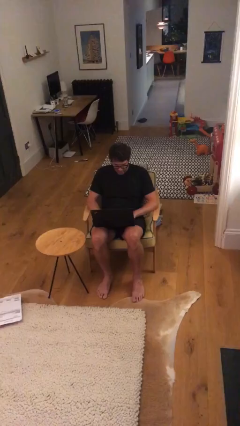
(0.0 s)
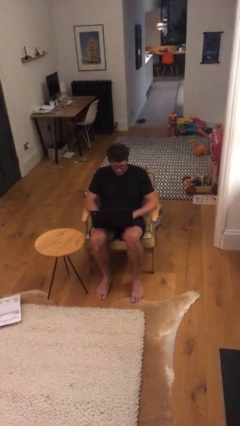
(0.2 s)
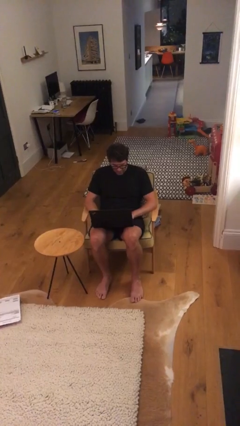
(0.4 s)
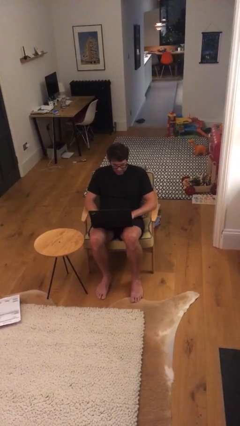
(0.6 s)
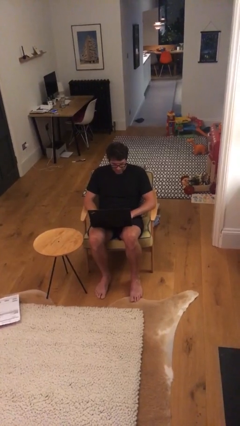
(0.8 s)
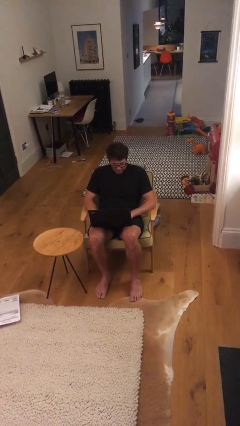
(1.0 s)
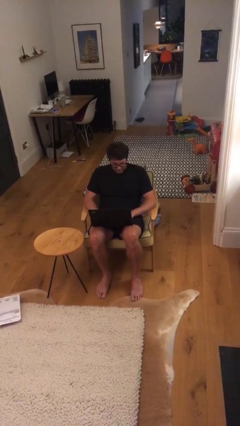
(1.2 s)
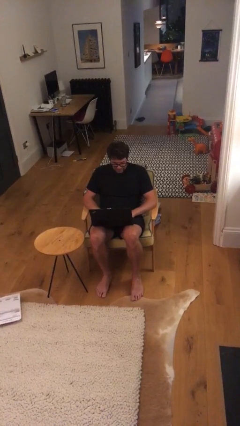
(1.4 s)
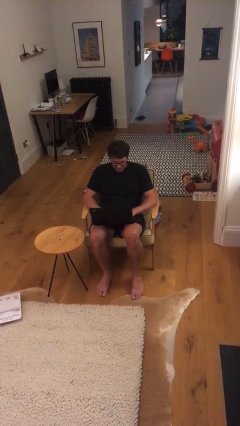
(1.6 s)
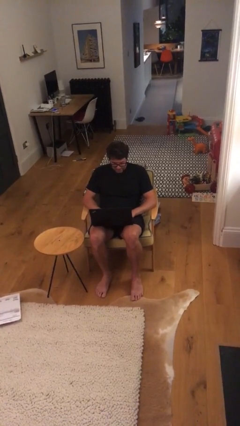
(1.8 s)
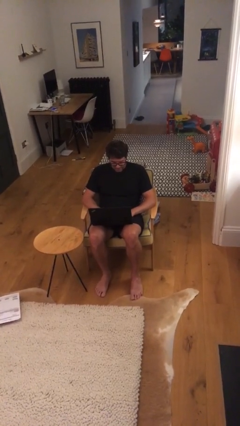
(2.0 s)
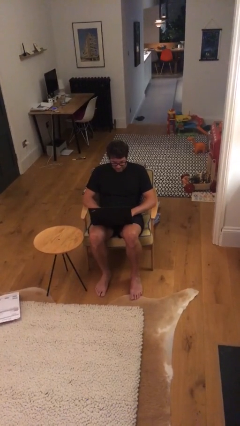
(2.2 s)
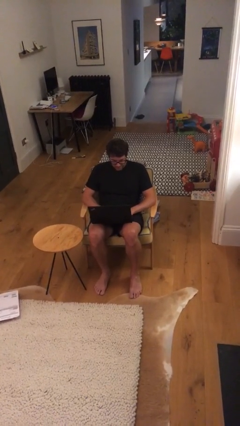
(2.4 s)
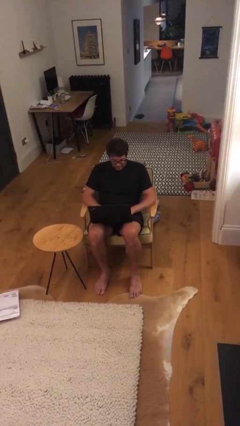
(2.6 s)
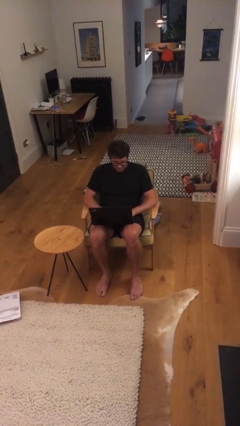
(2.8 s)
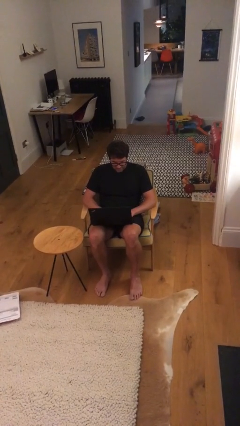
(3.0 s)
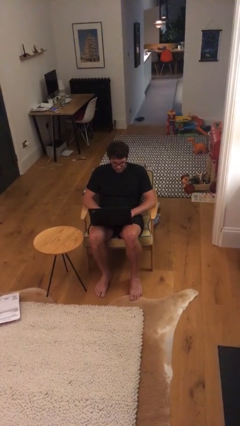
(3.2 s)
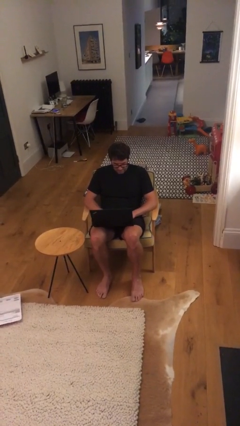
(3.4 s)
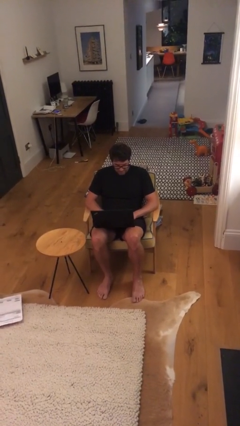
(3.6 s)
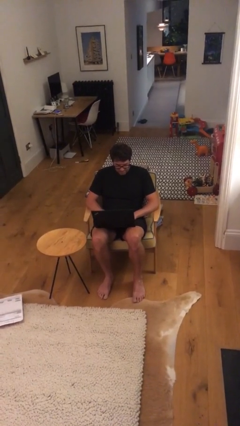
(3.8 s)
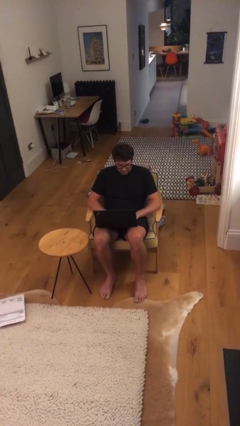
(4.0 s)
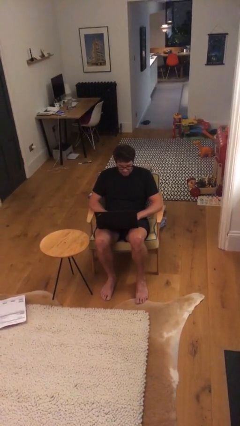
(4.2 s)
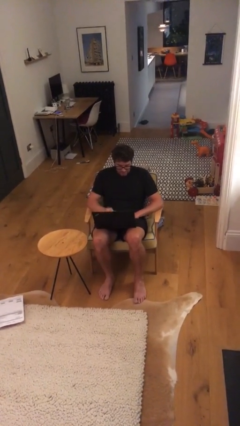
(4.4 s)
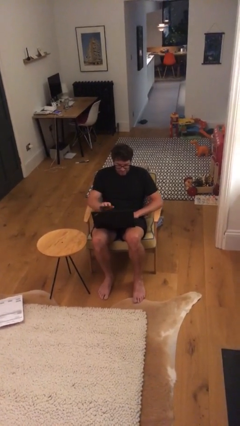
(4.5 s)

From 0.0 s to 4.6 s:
person interacts with laptop

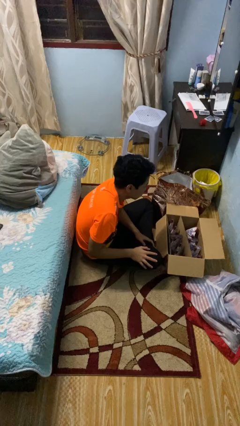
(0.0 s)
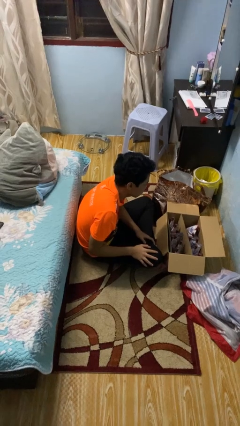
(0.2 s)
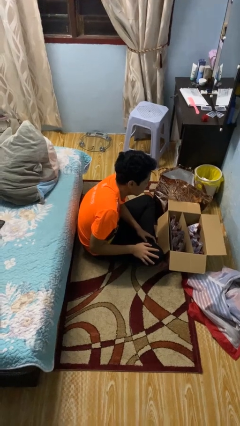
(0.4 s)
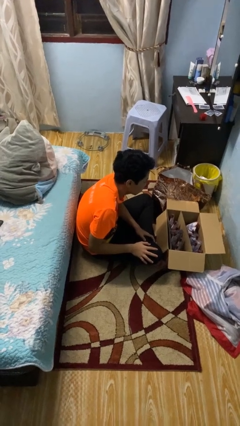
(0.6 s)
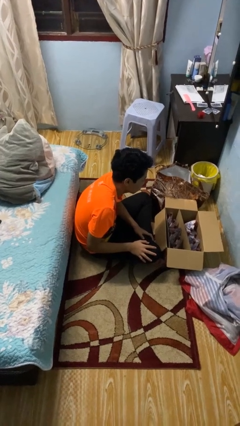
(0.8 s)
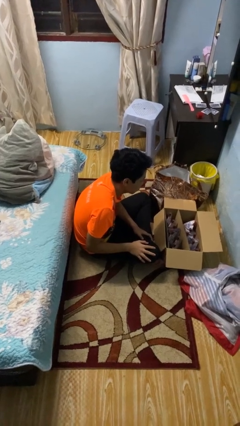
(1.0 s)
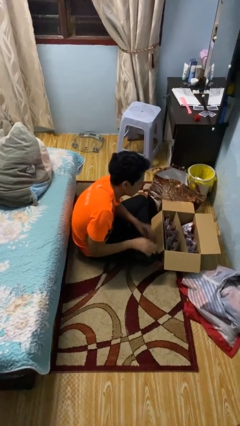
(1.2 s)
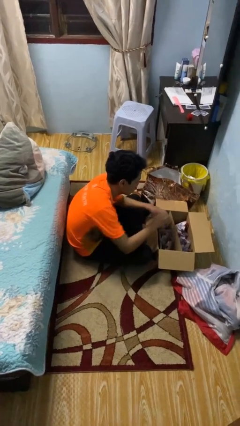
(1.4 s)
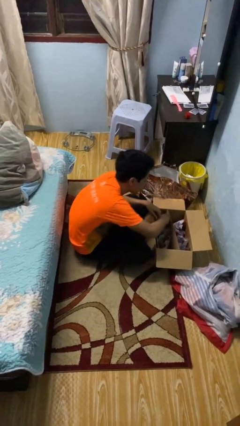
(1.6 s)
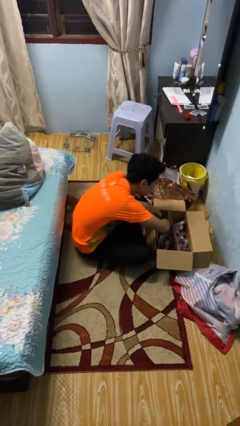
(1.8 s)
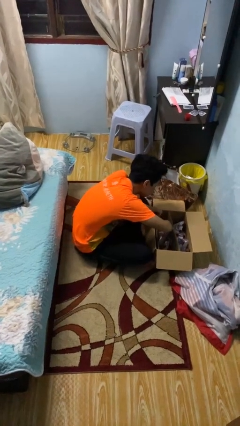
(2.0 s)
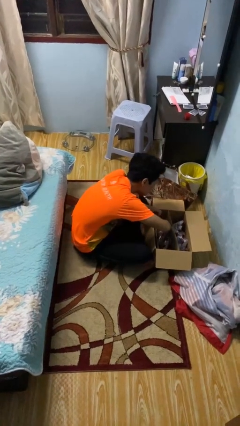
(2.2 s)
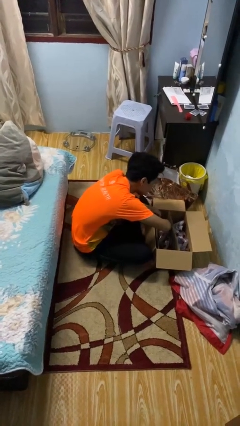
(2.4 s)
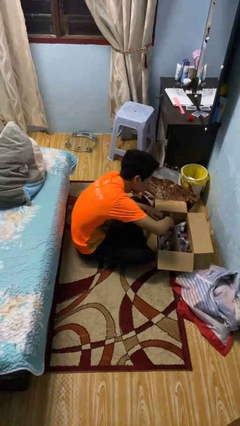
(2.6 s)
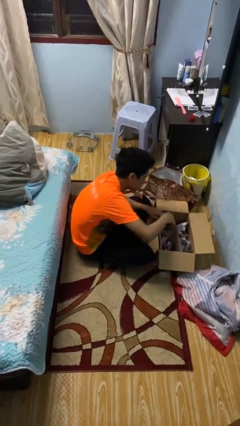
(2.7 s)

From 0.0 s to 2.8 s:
person searches in bag

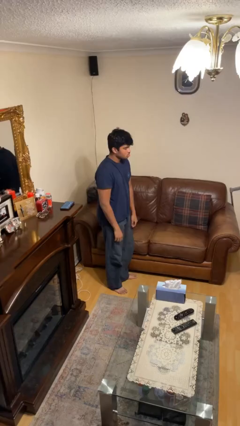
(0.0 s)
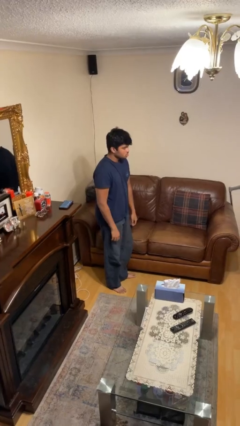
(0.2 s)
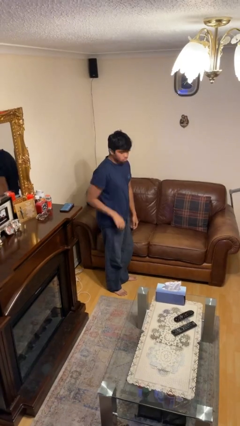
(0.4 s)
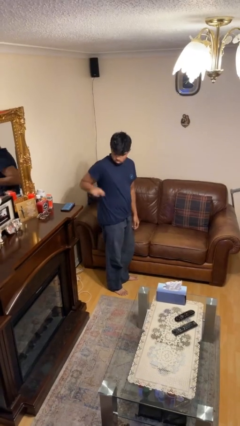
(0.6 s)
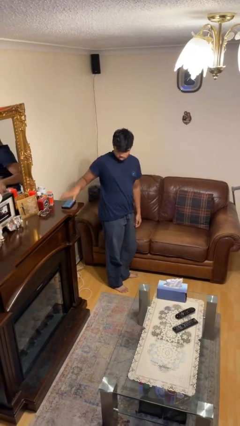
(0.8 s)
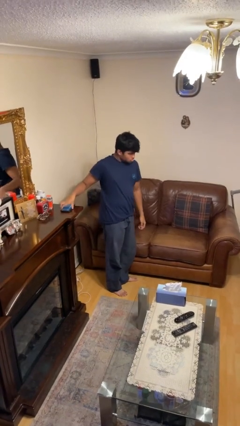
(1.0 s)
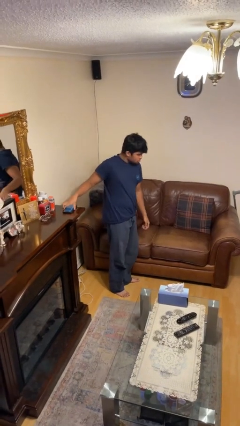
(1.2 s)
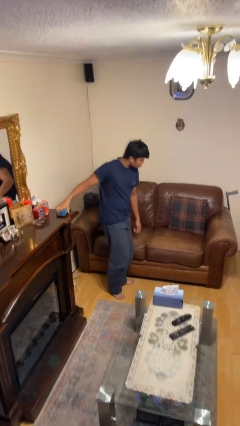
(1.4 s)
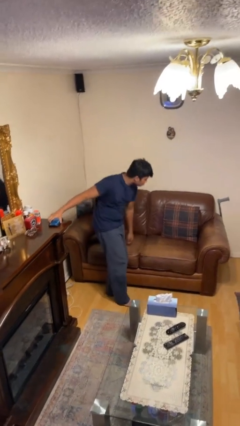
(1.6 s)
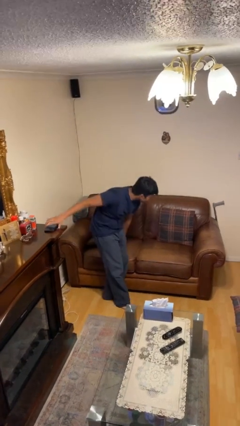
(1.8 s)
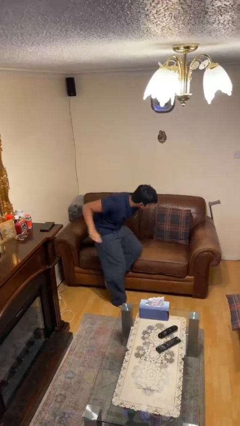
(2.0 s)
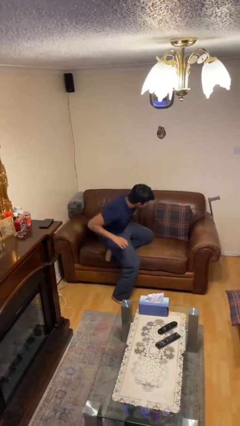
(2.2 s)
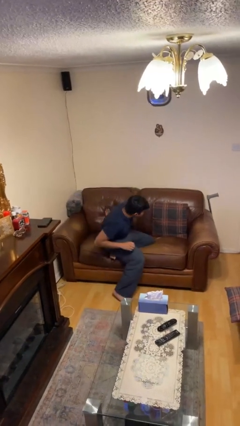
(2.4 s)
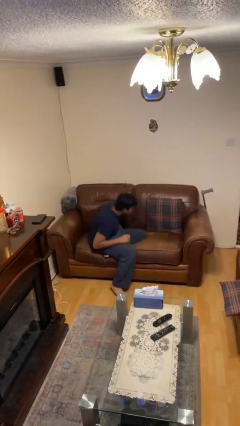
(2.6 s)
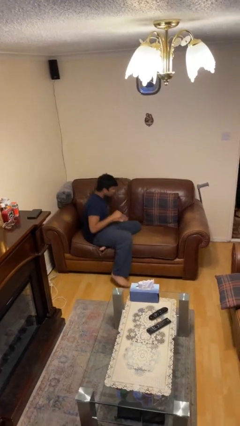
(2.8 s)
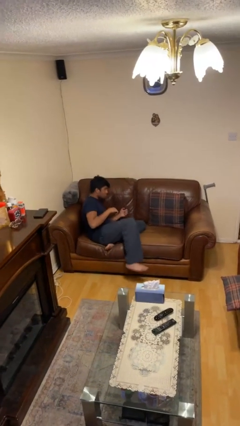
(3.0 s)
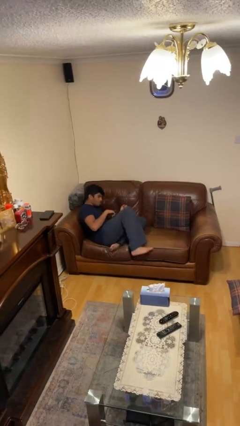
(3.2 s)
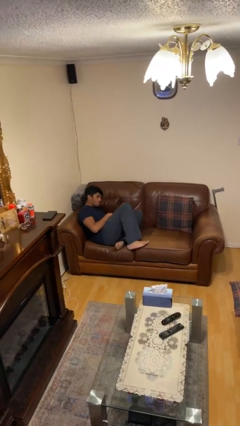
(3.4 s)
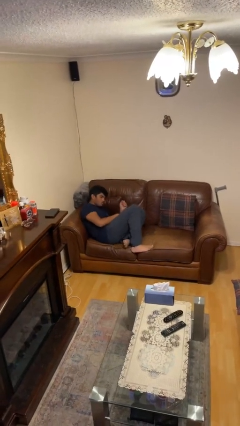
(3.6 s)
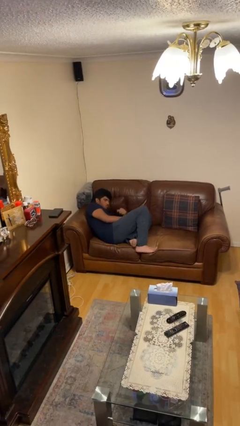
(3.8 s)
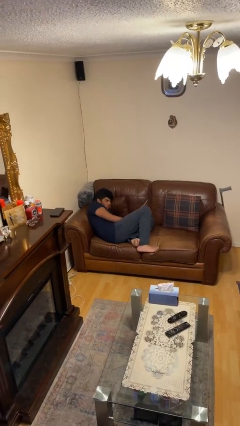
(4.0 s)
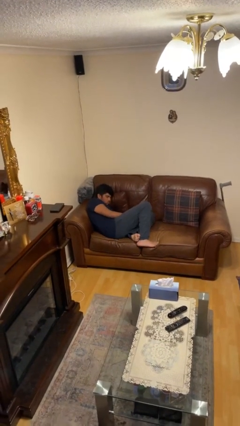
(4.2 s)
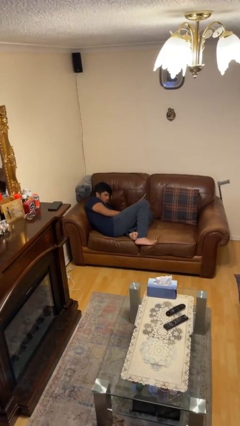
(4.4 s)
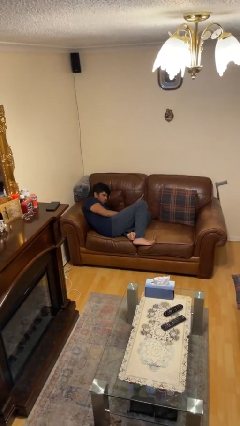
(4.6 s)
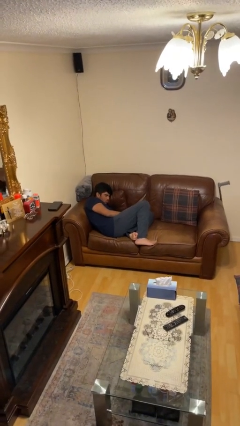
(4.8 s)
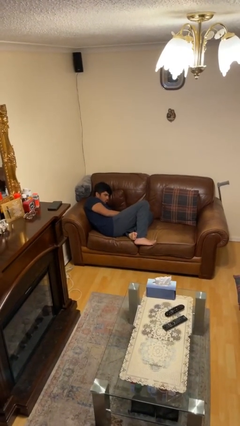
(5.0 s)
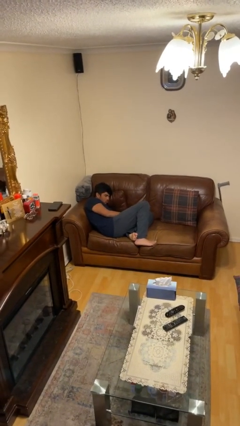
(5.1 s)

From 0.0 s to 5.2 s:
person lies down on couch

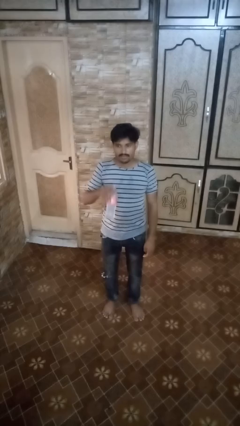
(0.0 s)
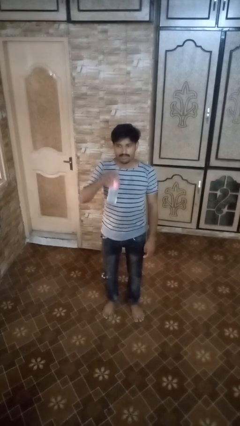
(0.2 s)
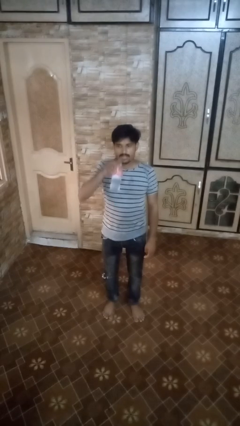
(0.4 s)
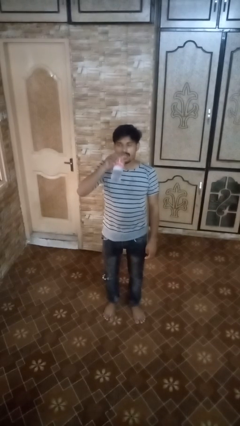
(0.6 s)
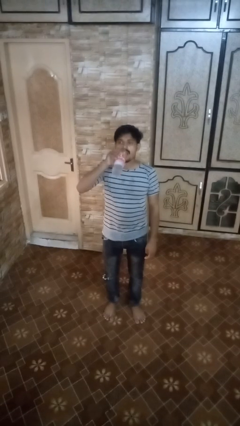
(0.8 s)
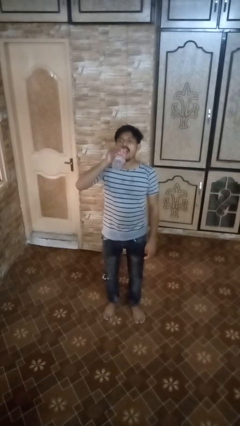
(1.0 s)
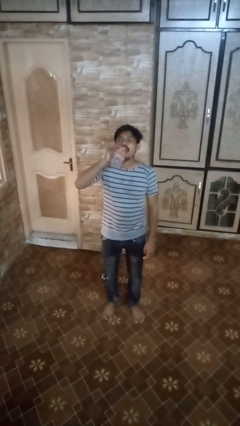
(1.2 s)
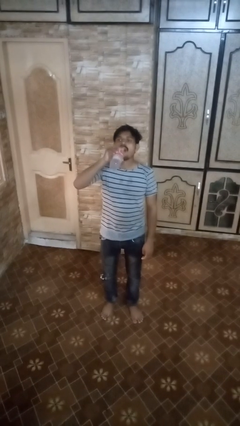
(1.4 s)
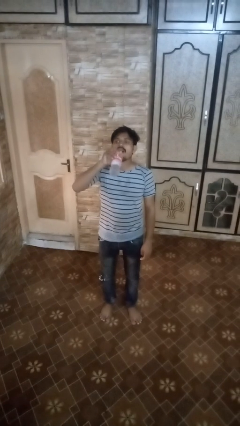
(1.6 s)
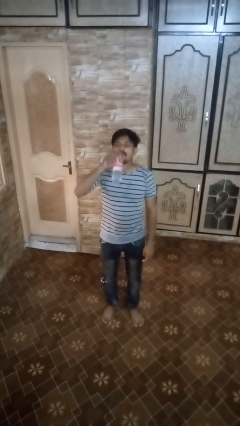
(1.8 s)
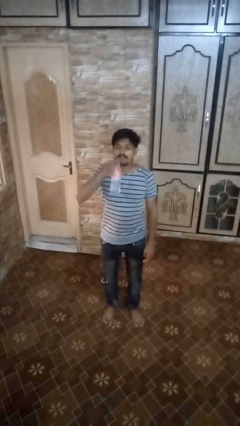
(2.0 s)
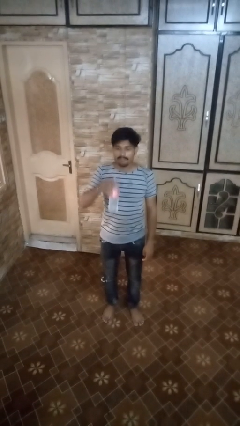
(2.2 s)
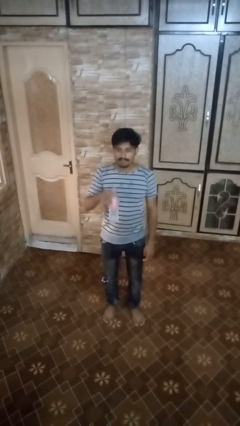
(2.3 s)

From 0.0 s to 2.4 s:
person drinks from bottle

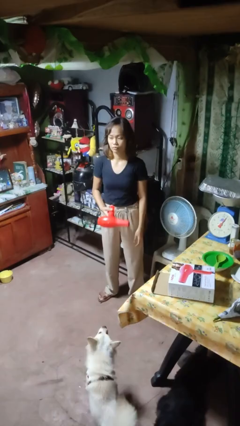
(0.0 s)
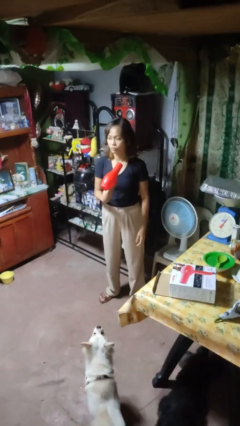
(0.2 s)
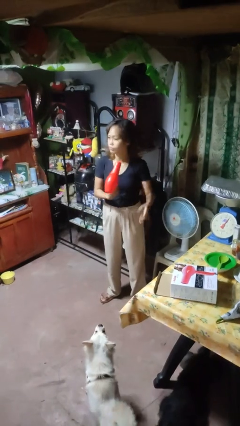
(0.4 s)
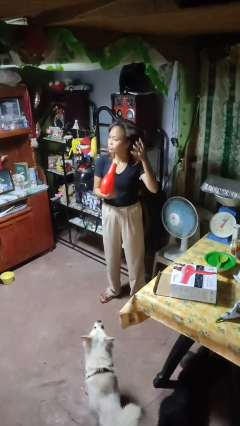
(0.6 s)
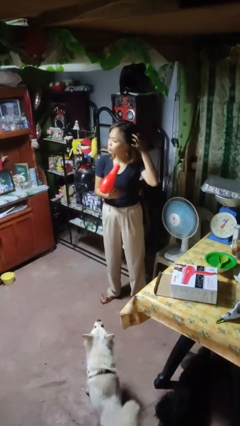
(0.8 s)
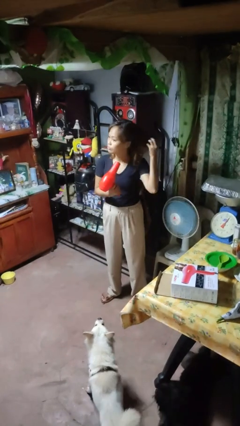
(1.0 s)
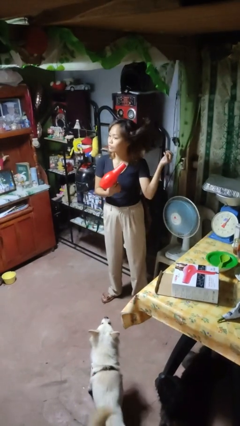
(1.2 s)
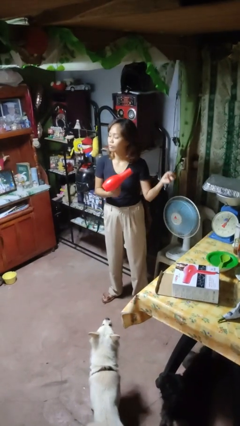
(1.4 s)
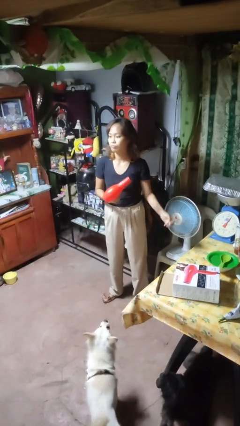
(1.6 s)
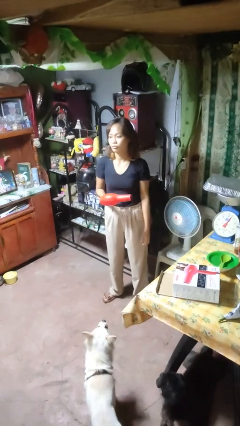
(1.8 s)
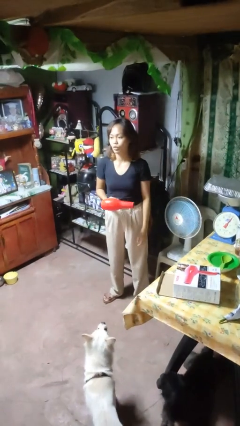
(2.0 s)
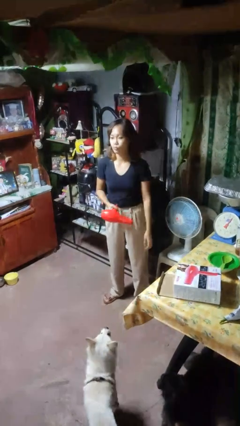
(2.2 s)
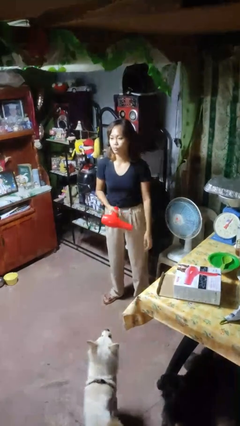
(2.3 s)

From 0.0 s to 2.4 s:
person dries hair with hairdryer
